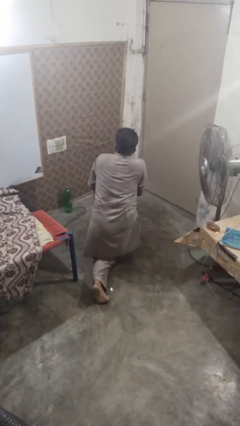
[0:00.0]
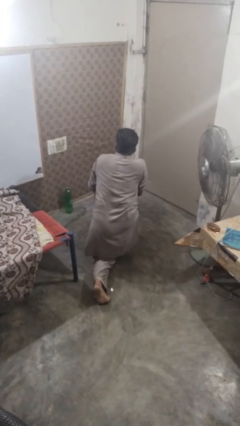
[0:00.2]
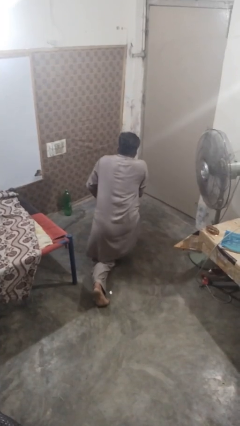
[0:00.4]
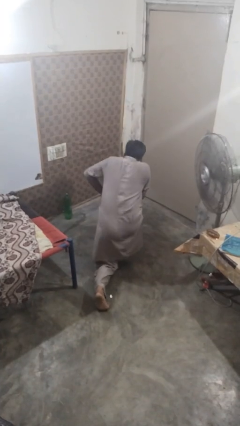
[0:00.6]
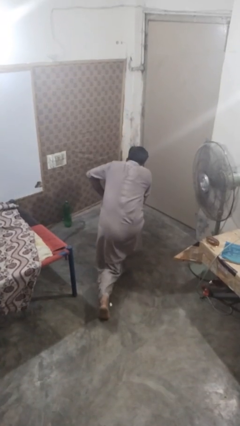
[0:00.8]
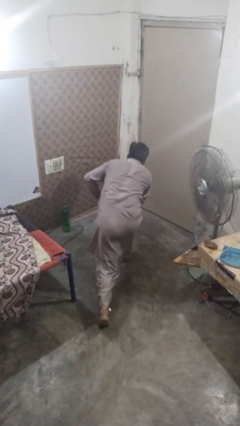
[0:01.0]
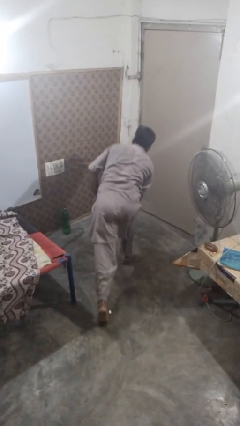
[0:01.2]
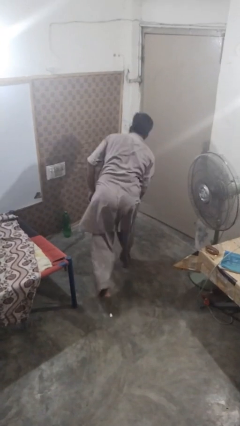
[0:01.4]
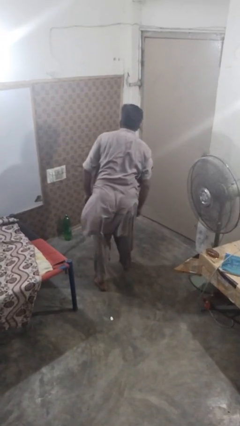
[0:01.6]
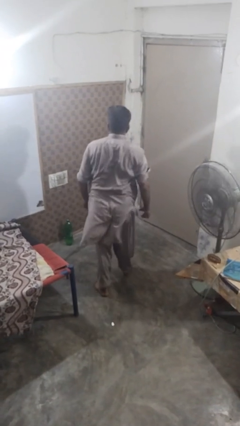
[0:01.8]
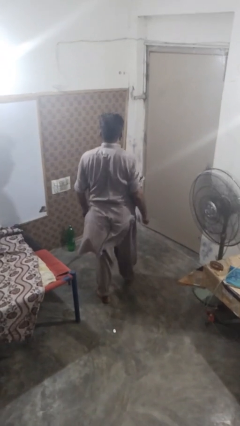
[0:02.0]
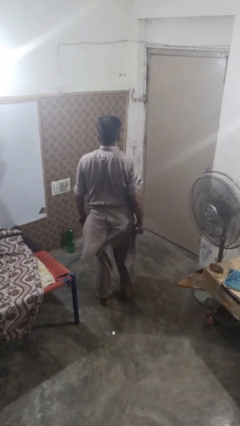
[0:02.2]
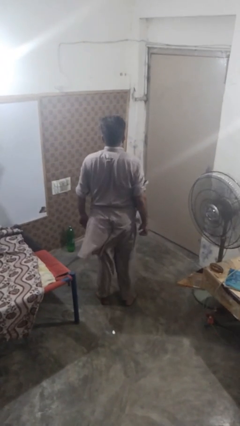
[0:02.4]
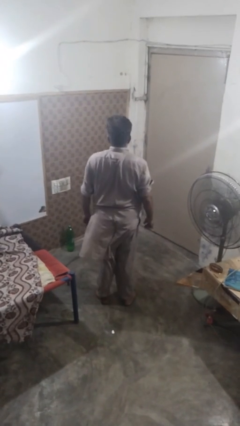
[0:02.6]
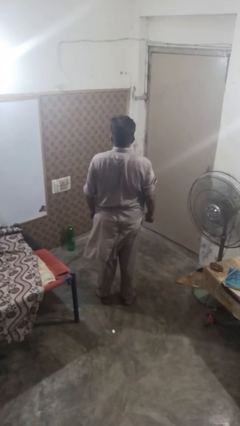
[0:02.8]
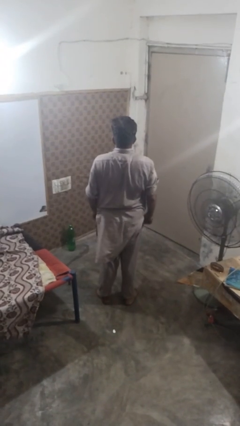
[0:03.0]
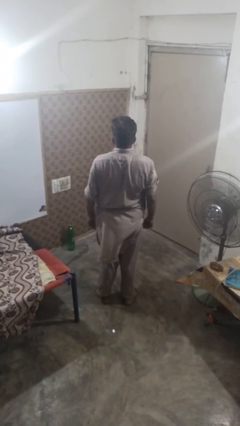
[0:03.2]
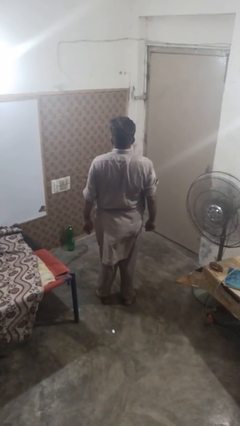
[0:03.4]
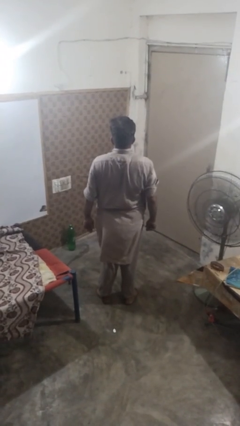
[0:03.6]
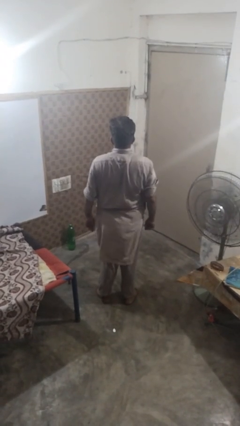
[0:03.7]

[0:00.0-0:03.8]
person stands up from floor

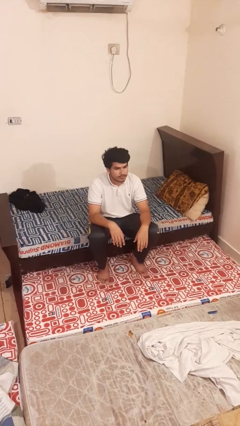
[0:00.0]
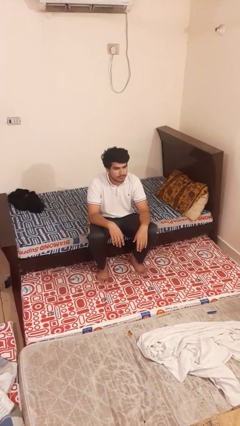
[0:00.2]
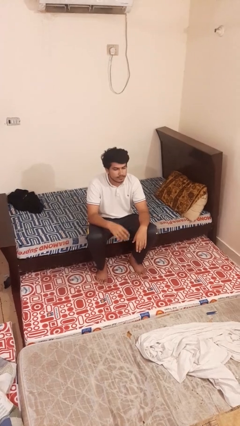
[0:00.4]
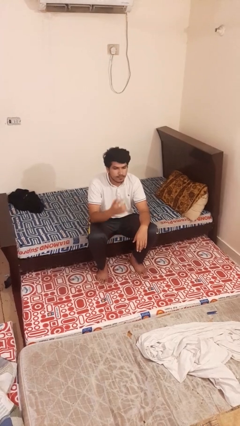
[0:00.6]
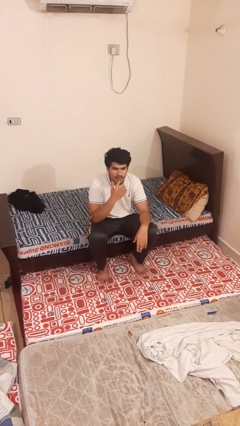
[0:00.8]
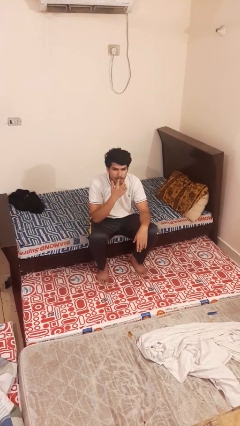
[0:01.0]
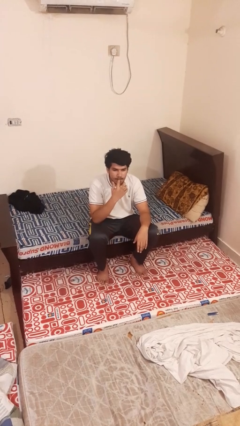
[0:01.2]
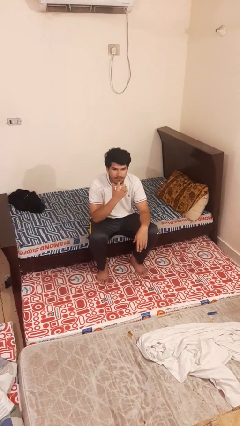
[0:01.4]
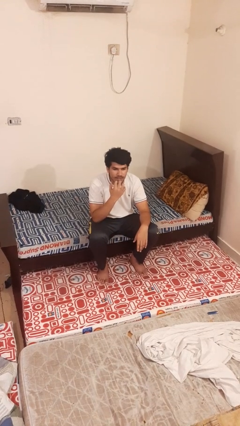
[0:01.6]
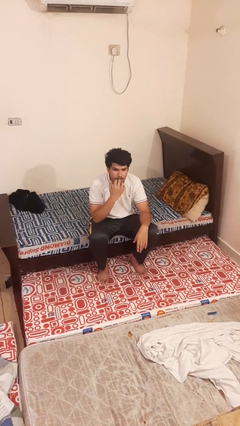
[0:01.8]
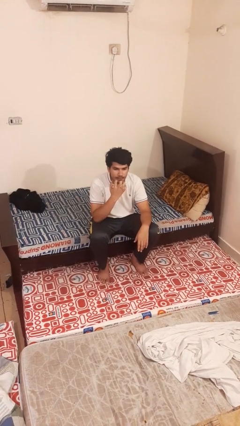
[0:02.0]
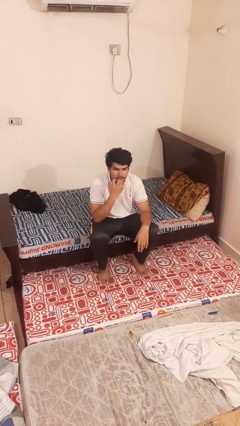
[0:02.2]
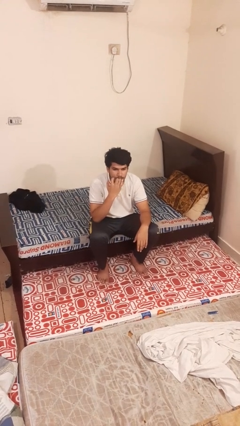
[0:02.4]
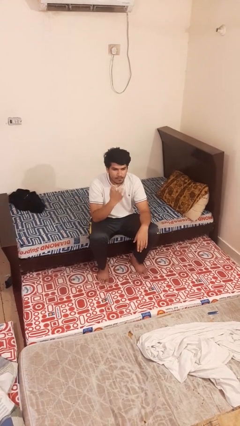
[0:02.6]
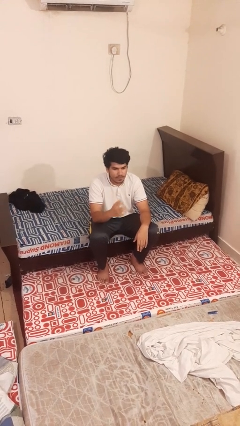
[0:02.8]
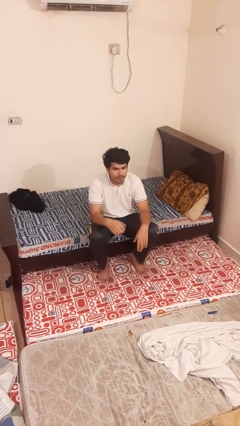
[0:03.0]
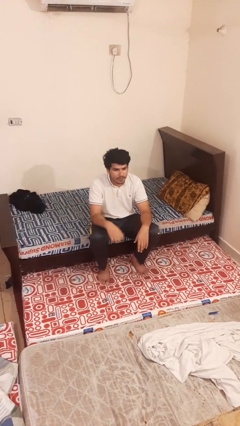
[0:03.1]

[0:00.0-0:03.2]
person licks fingers

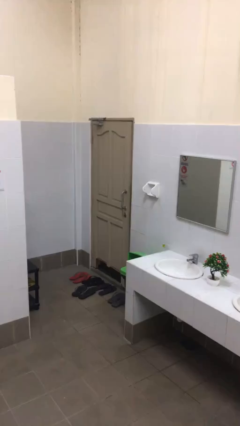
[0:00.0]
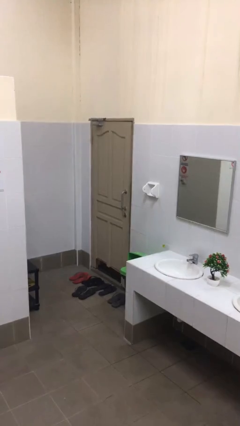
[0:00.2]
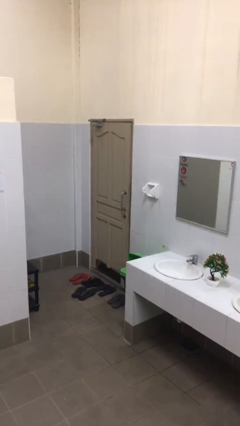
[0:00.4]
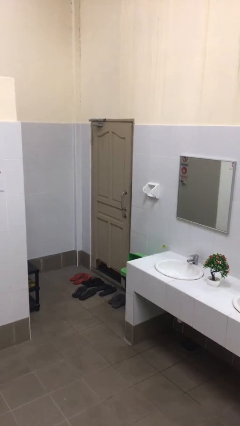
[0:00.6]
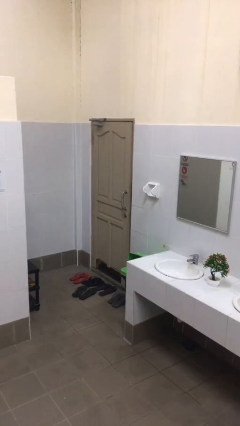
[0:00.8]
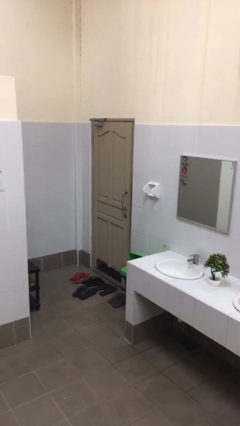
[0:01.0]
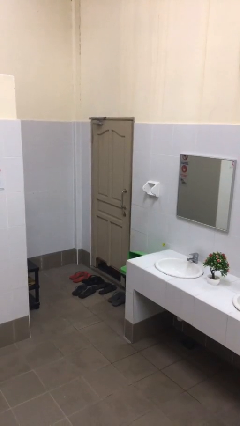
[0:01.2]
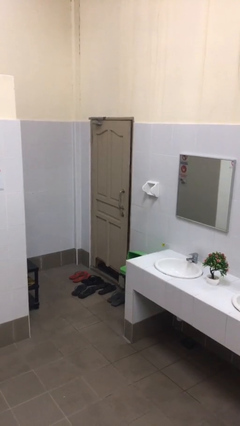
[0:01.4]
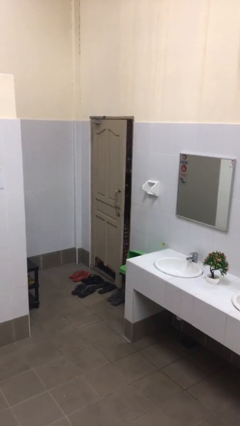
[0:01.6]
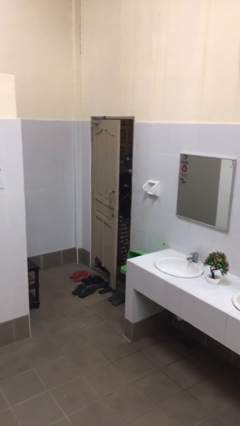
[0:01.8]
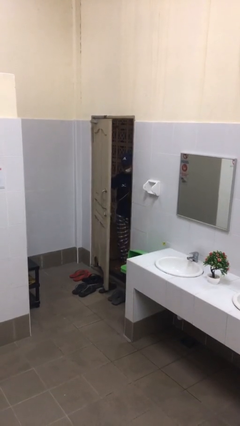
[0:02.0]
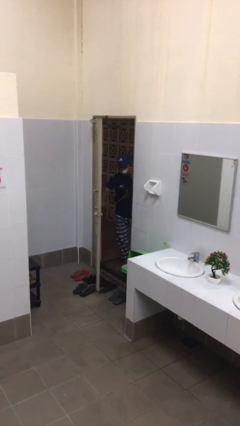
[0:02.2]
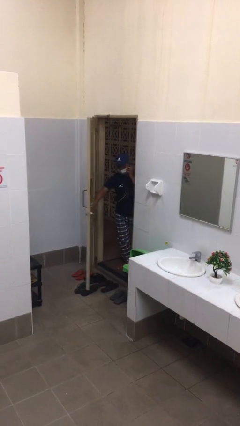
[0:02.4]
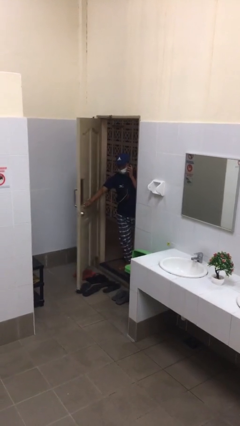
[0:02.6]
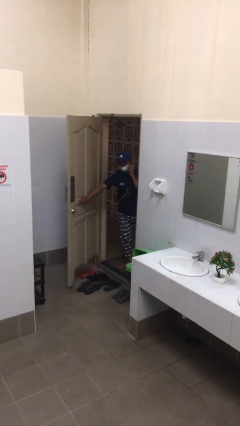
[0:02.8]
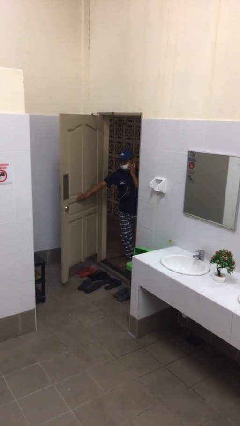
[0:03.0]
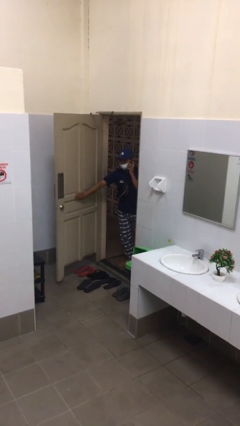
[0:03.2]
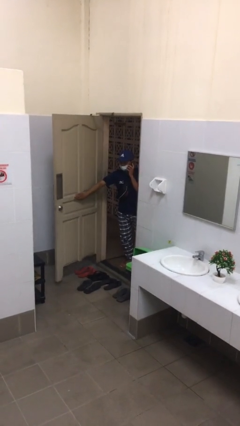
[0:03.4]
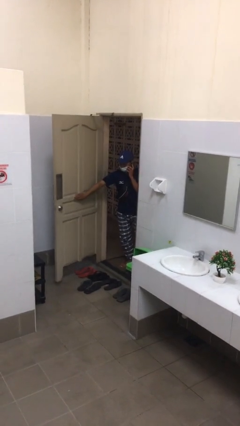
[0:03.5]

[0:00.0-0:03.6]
person opens facility door

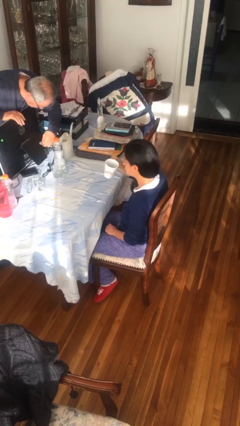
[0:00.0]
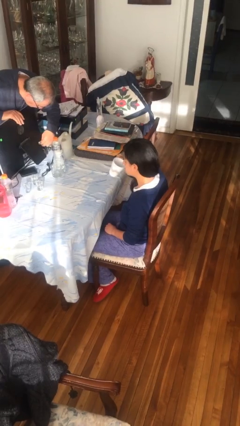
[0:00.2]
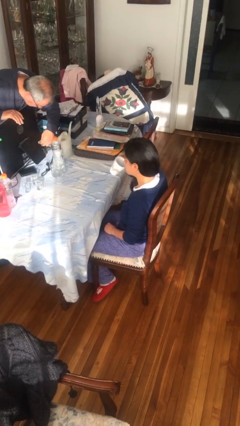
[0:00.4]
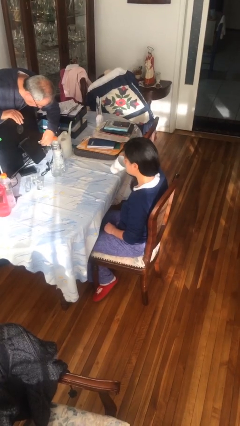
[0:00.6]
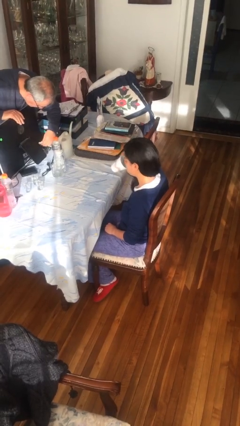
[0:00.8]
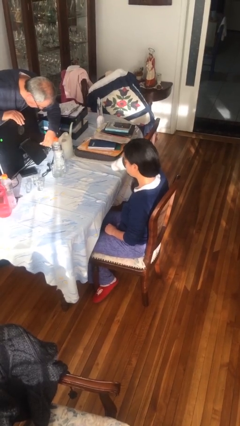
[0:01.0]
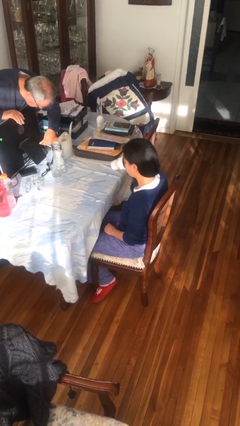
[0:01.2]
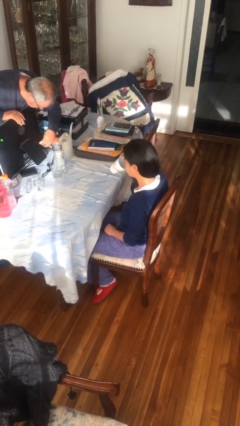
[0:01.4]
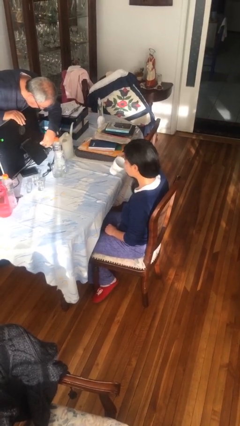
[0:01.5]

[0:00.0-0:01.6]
person drinks from mug

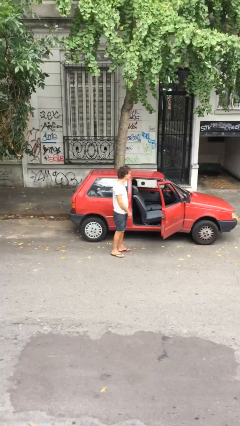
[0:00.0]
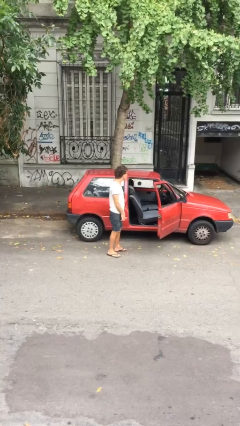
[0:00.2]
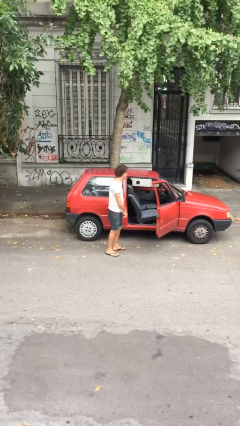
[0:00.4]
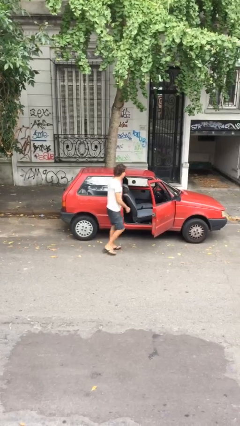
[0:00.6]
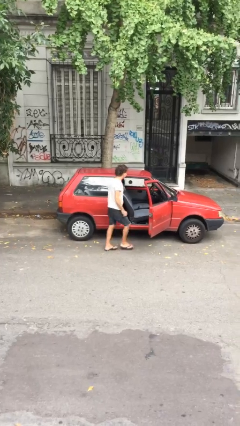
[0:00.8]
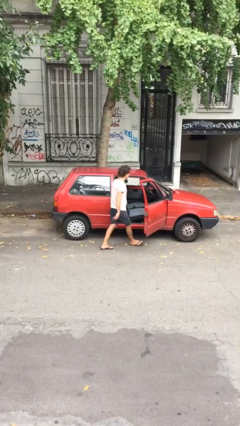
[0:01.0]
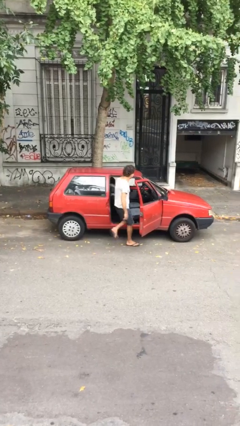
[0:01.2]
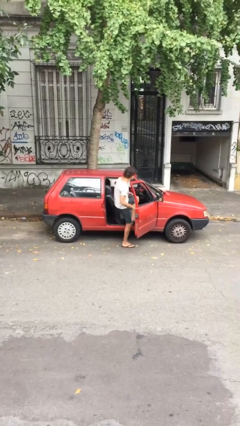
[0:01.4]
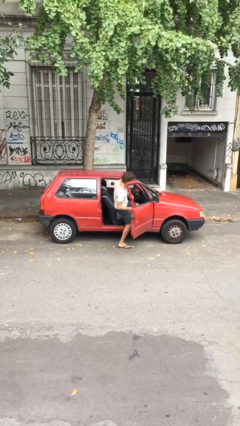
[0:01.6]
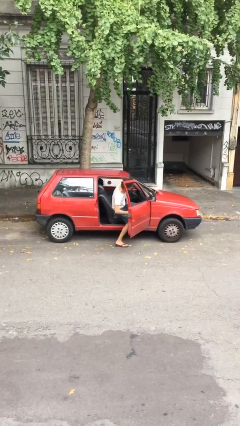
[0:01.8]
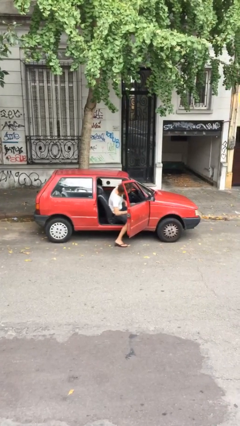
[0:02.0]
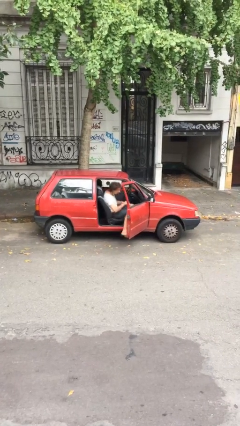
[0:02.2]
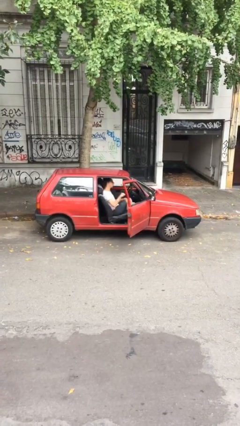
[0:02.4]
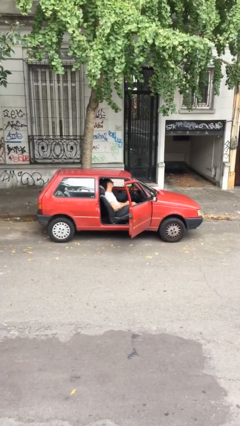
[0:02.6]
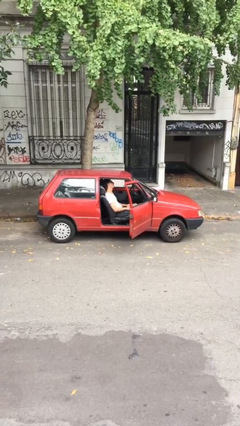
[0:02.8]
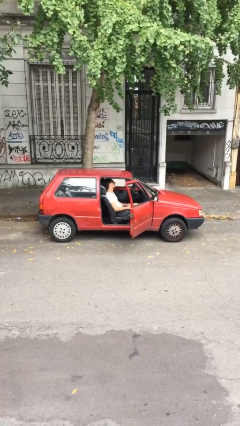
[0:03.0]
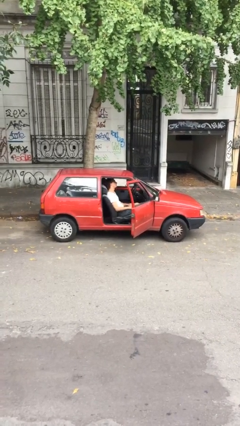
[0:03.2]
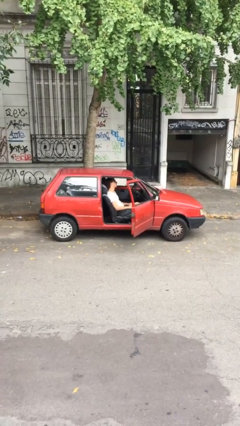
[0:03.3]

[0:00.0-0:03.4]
person enters car

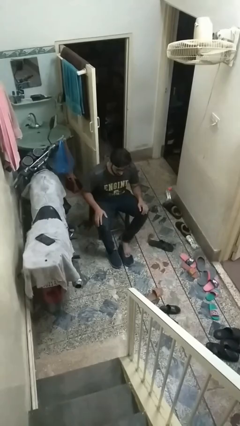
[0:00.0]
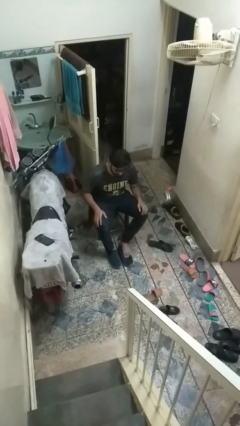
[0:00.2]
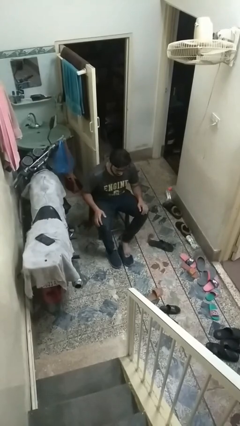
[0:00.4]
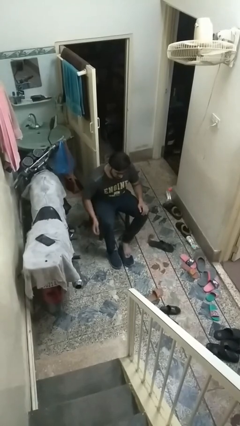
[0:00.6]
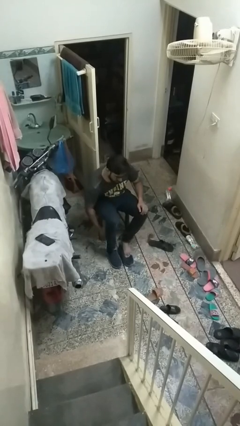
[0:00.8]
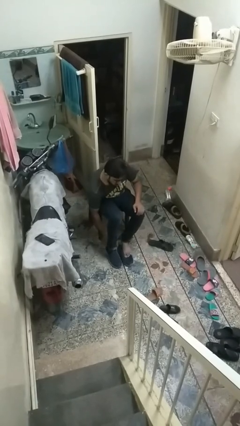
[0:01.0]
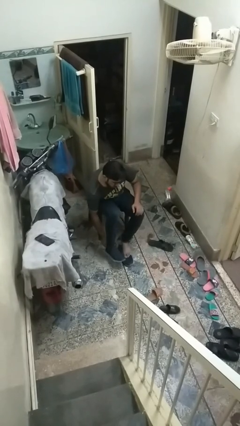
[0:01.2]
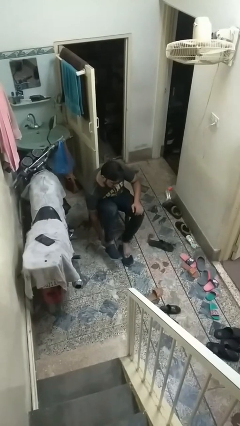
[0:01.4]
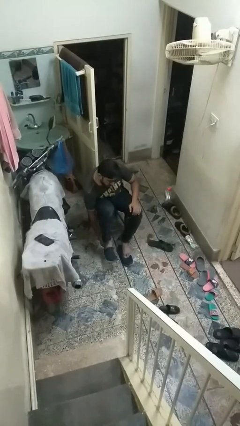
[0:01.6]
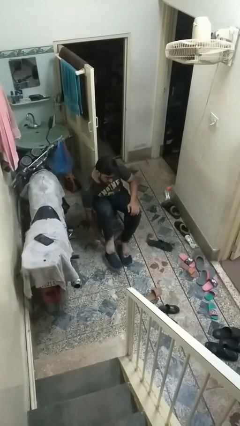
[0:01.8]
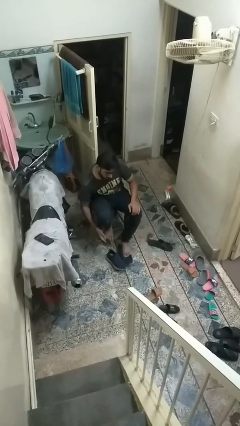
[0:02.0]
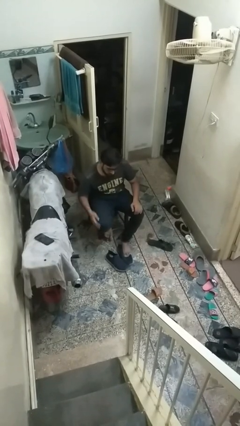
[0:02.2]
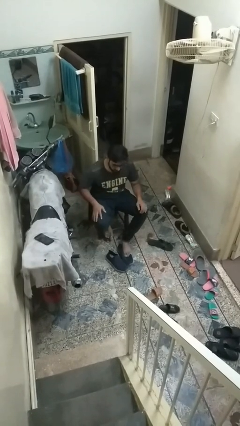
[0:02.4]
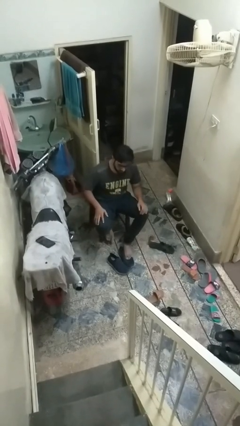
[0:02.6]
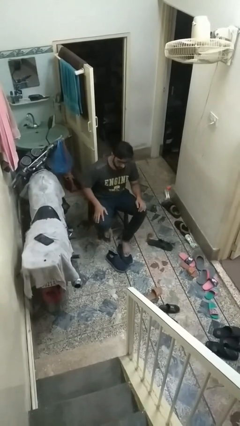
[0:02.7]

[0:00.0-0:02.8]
person takes off shoes
